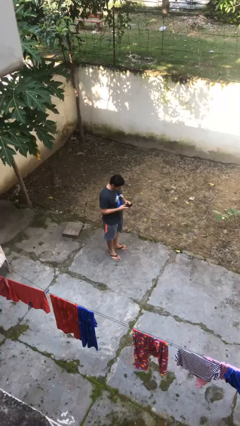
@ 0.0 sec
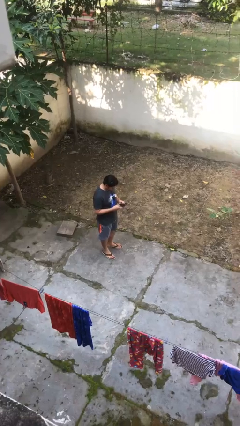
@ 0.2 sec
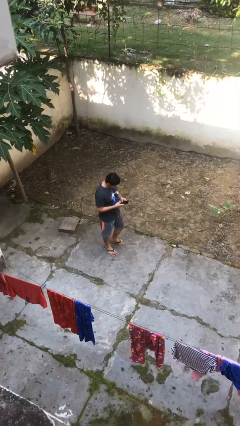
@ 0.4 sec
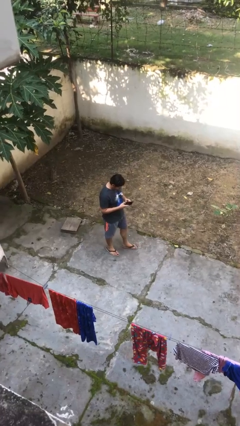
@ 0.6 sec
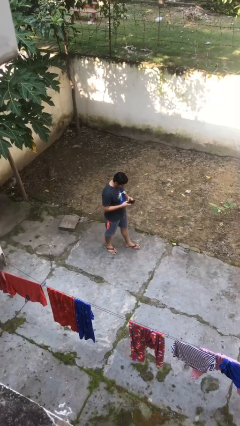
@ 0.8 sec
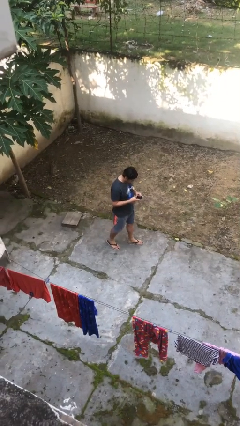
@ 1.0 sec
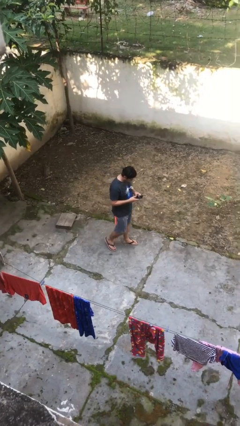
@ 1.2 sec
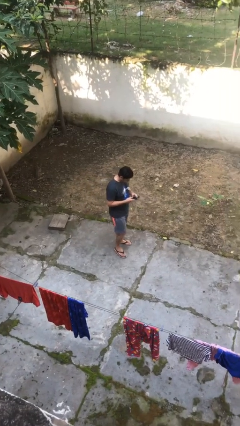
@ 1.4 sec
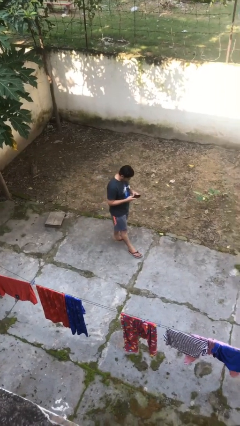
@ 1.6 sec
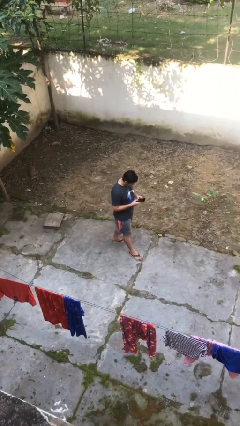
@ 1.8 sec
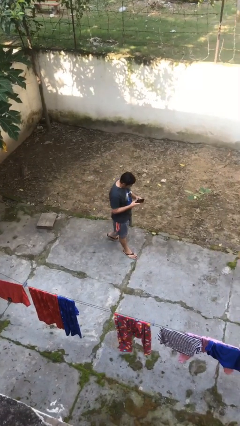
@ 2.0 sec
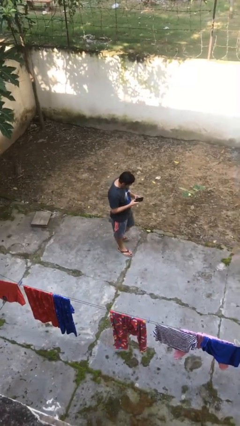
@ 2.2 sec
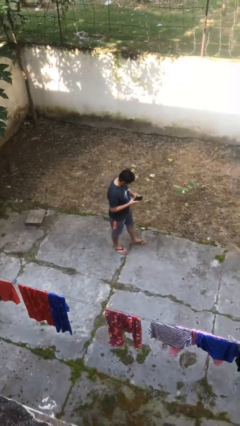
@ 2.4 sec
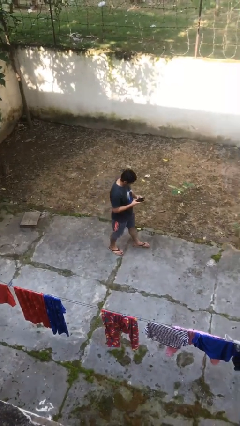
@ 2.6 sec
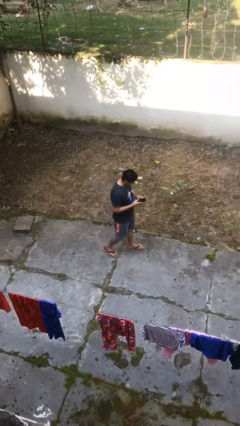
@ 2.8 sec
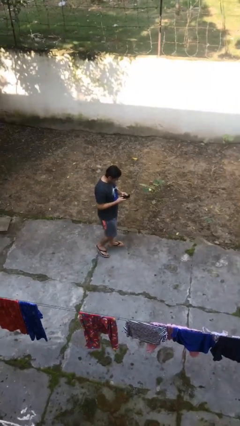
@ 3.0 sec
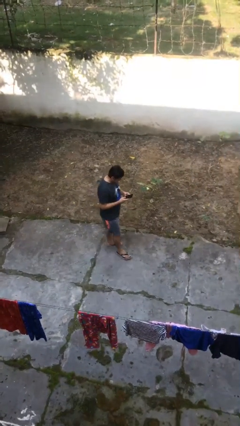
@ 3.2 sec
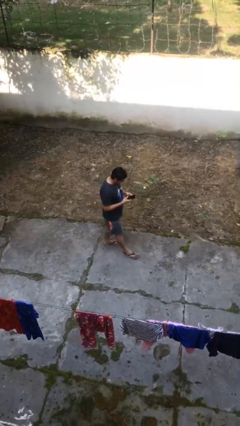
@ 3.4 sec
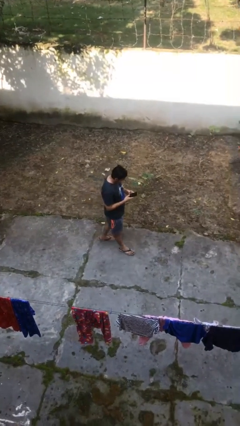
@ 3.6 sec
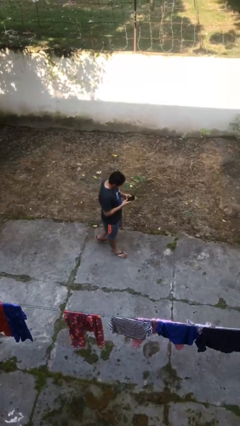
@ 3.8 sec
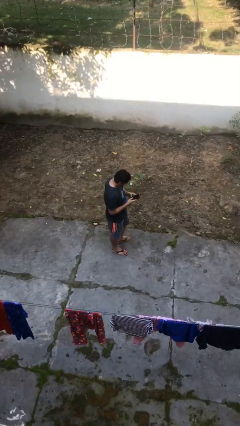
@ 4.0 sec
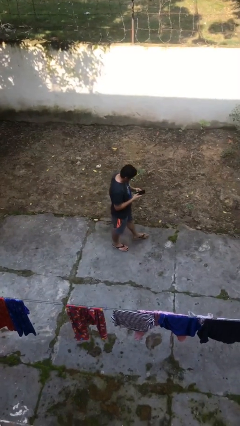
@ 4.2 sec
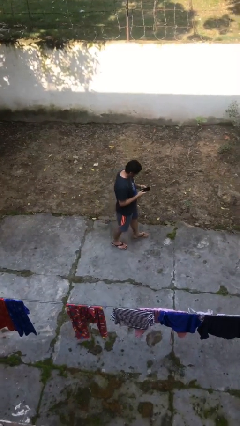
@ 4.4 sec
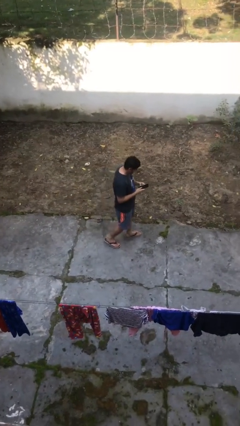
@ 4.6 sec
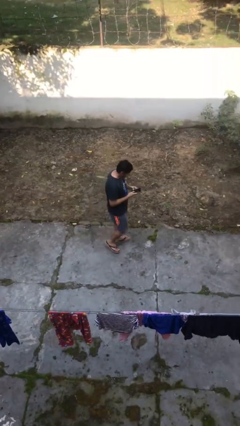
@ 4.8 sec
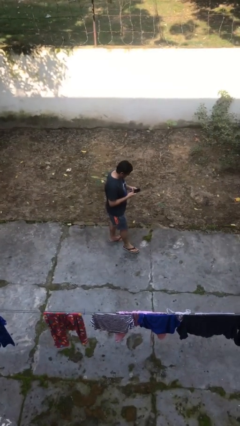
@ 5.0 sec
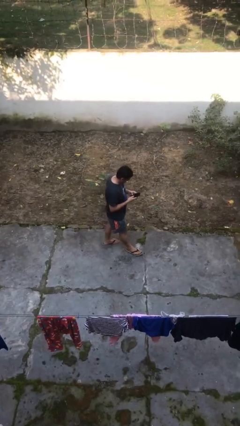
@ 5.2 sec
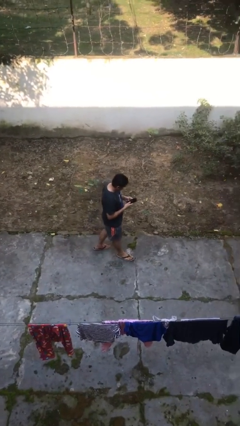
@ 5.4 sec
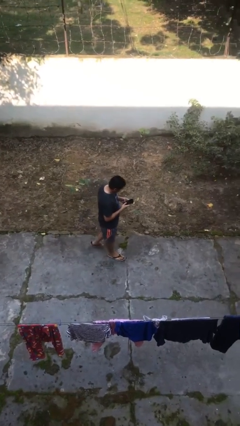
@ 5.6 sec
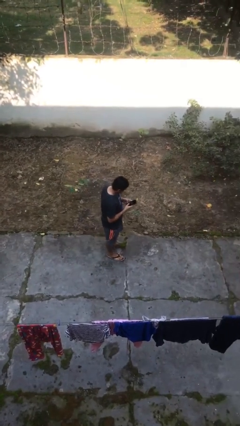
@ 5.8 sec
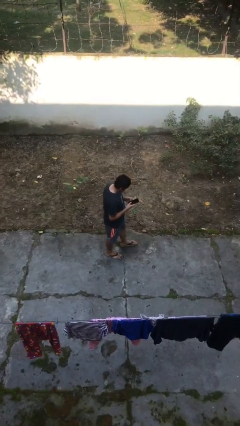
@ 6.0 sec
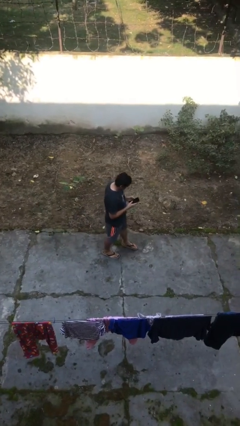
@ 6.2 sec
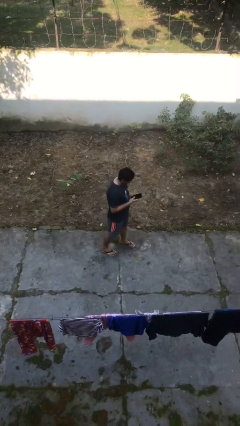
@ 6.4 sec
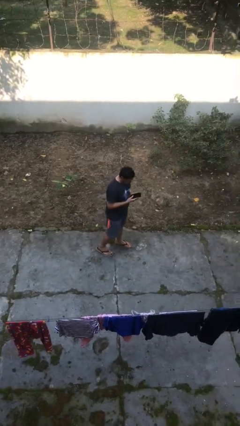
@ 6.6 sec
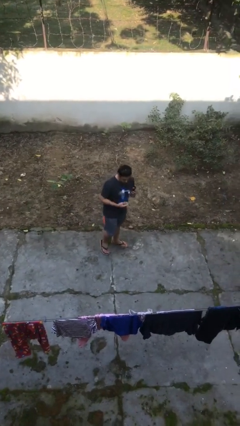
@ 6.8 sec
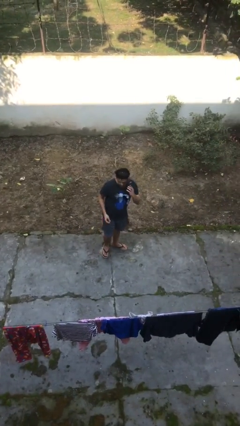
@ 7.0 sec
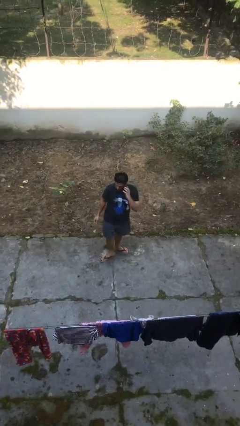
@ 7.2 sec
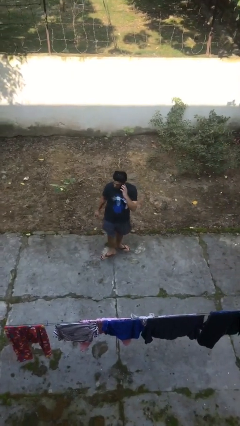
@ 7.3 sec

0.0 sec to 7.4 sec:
person texts on phone

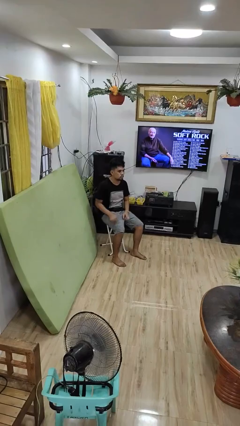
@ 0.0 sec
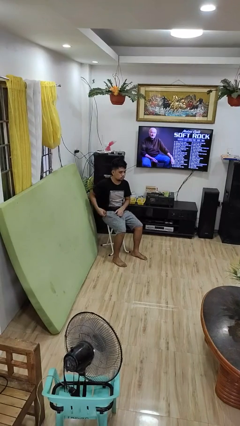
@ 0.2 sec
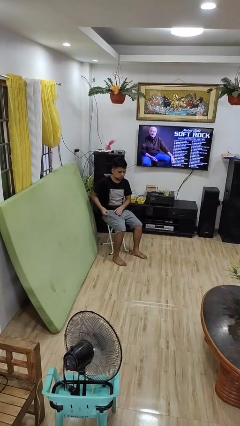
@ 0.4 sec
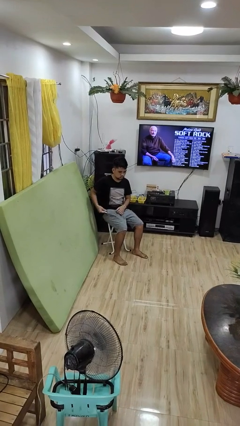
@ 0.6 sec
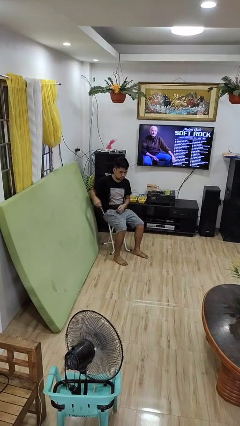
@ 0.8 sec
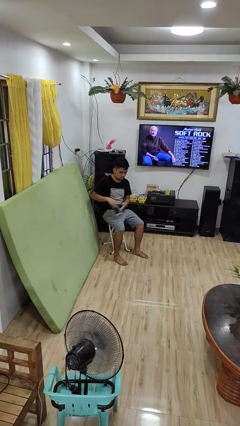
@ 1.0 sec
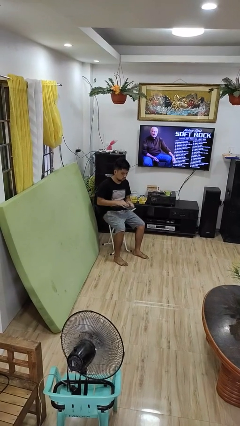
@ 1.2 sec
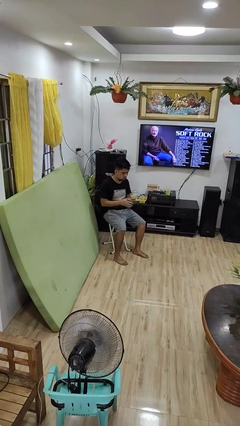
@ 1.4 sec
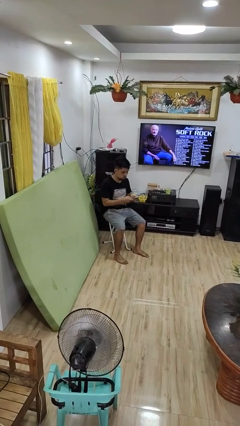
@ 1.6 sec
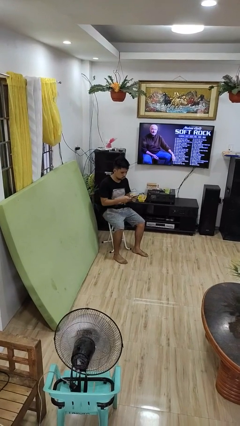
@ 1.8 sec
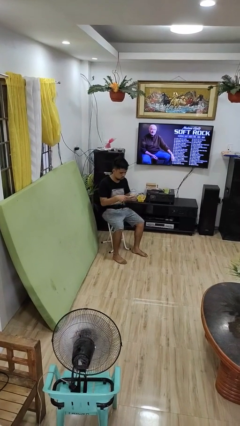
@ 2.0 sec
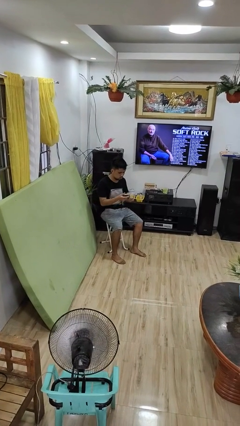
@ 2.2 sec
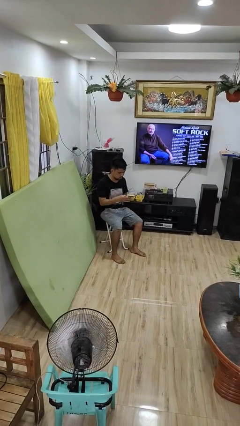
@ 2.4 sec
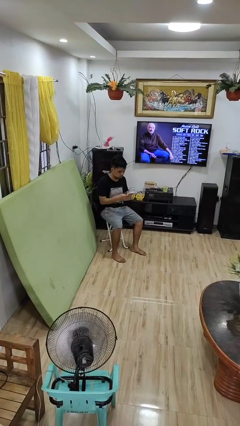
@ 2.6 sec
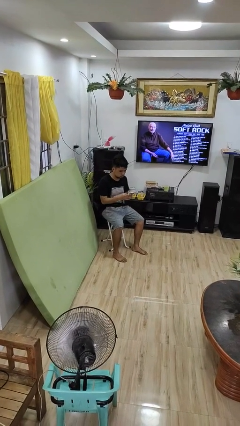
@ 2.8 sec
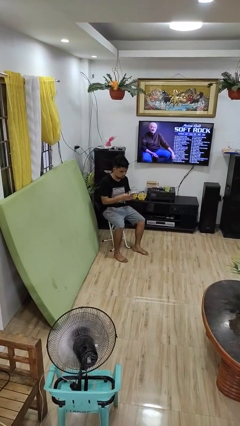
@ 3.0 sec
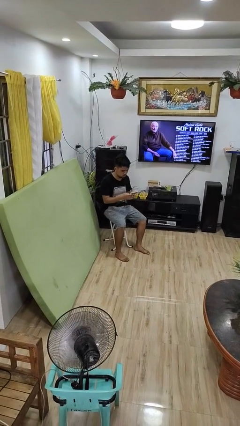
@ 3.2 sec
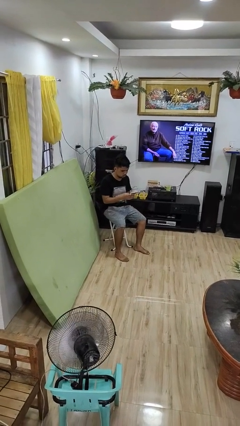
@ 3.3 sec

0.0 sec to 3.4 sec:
person takes phone from pocket

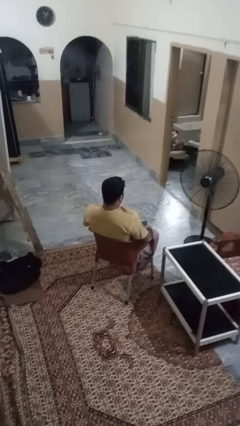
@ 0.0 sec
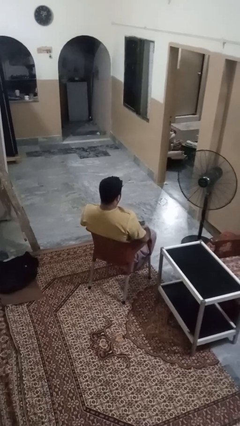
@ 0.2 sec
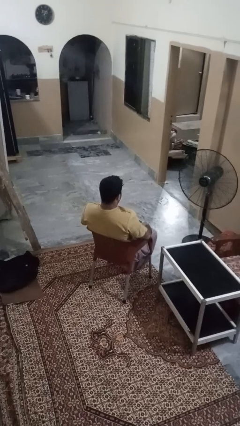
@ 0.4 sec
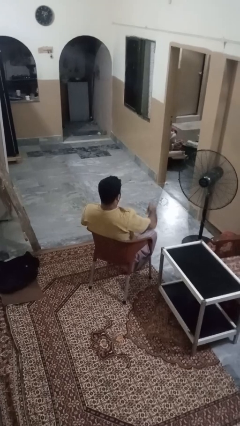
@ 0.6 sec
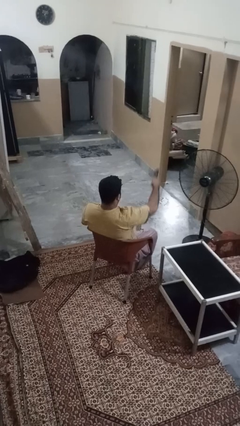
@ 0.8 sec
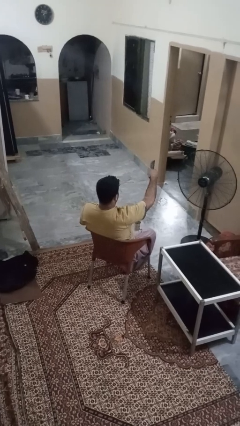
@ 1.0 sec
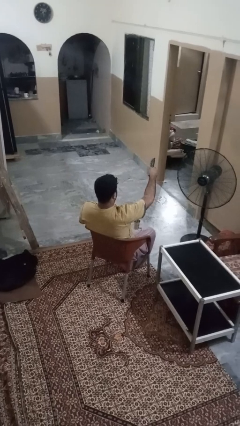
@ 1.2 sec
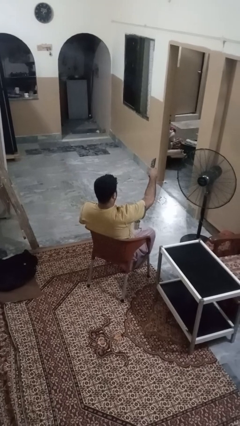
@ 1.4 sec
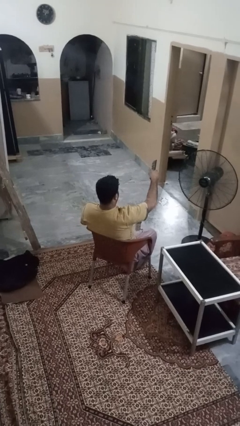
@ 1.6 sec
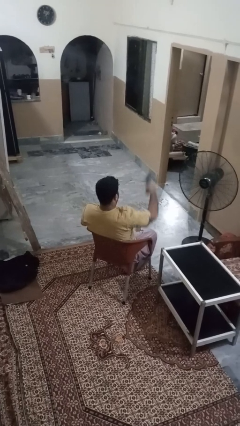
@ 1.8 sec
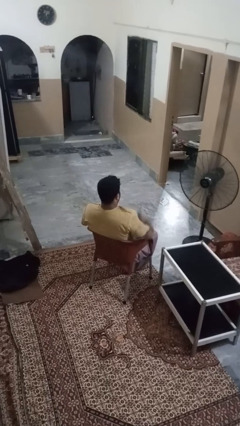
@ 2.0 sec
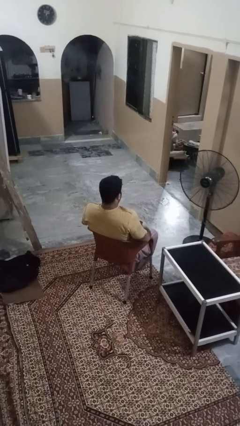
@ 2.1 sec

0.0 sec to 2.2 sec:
person uses television remote

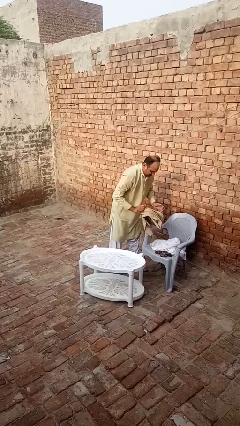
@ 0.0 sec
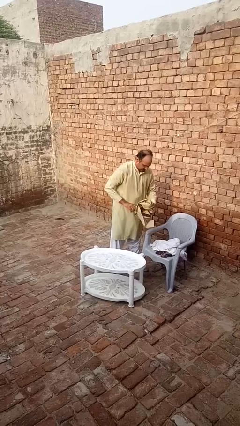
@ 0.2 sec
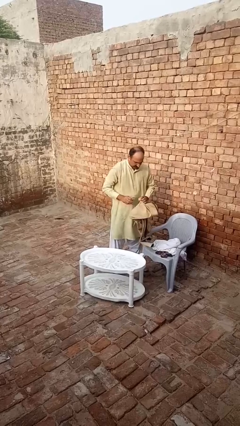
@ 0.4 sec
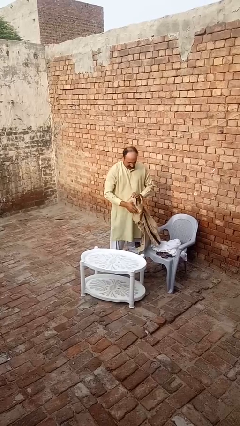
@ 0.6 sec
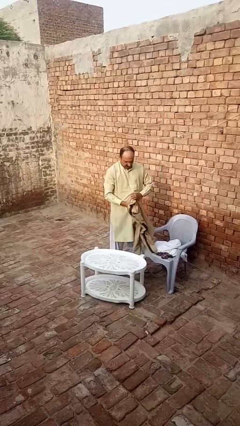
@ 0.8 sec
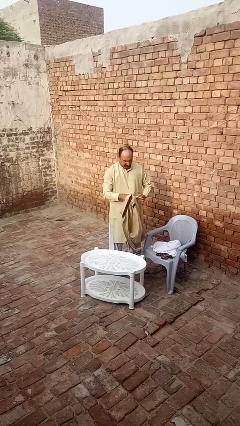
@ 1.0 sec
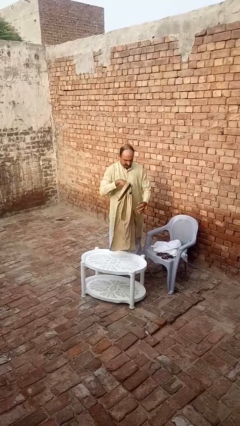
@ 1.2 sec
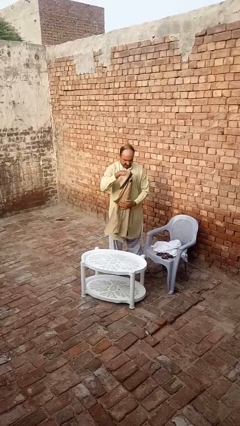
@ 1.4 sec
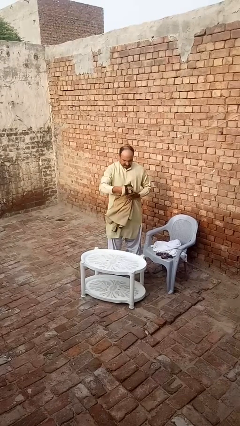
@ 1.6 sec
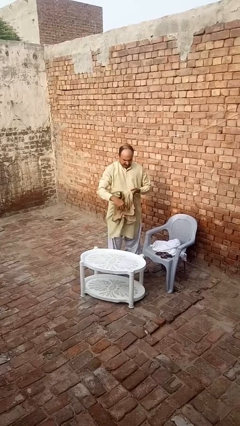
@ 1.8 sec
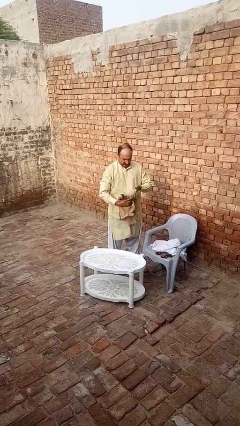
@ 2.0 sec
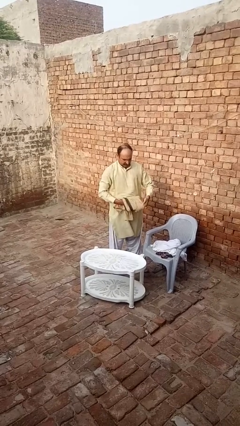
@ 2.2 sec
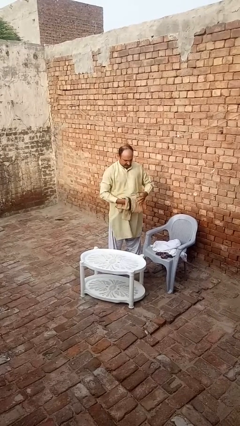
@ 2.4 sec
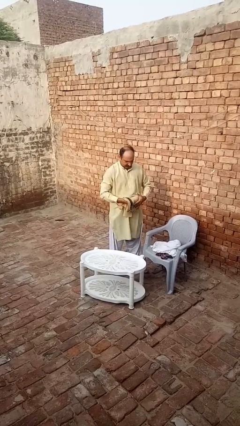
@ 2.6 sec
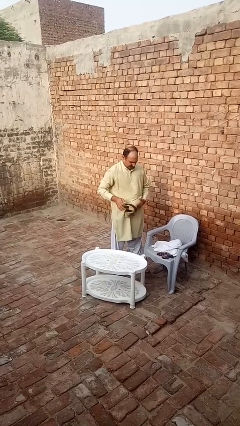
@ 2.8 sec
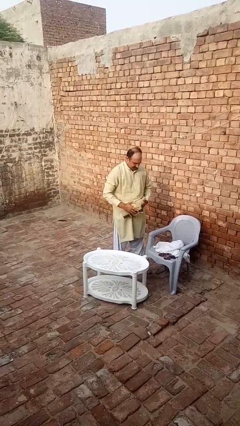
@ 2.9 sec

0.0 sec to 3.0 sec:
person folds shirt

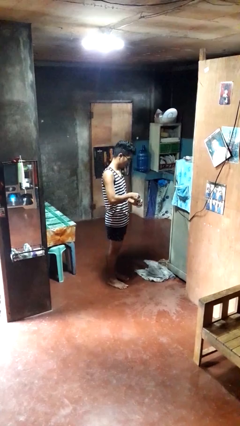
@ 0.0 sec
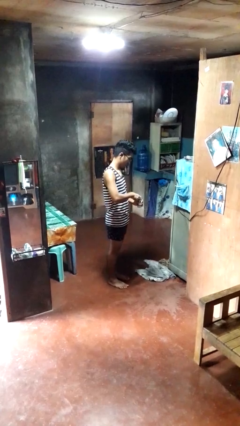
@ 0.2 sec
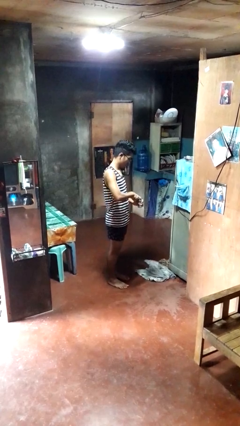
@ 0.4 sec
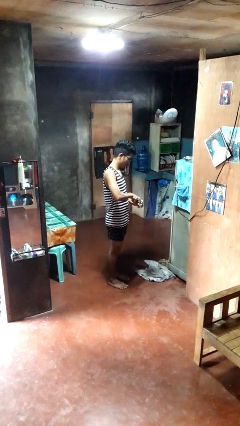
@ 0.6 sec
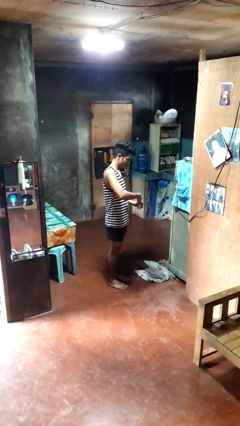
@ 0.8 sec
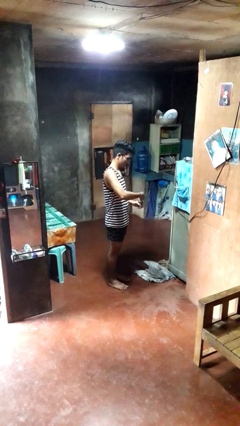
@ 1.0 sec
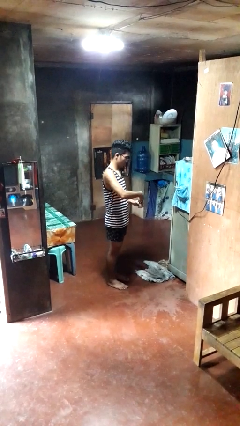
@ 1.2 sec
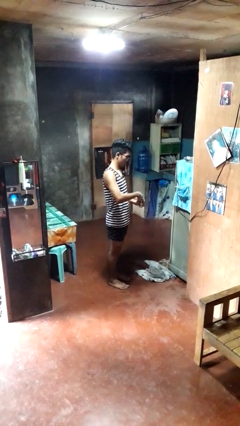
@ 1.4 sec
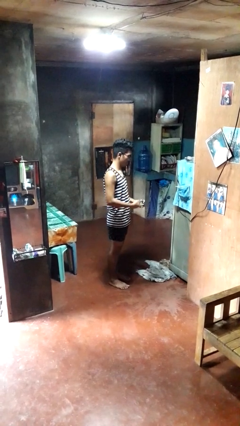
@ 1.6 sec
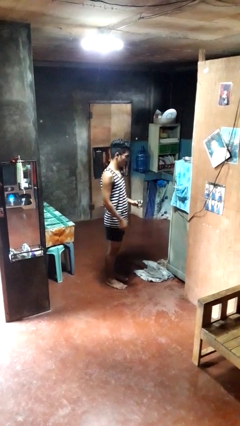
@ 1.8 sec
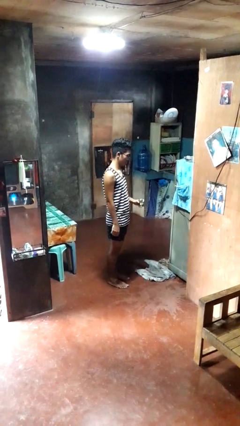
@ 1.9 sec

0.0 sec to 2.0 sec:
person opens beverage can
